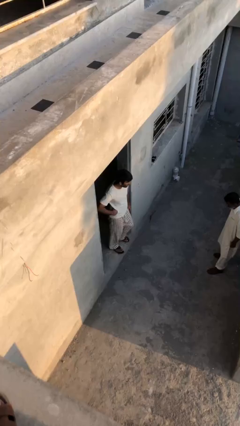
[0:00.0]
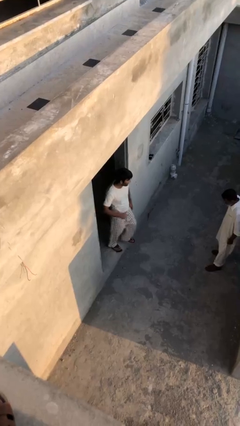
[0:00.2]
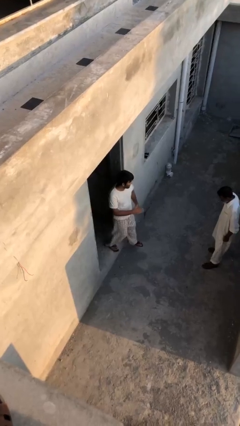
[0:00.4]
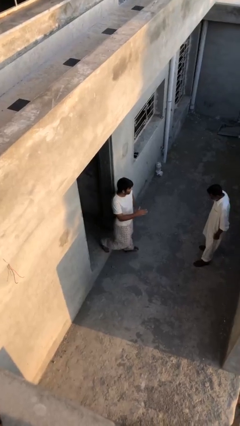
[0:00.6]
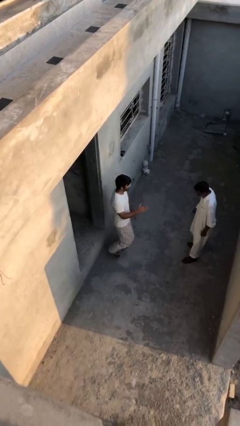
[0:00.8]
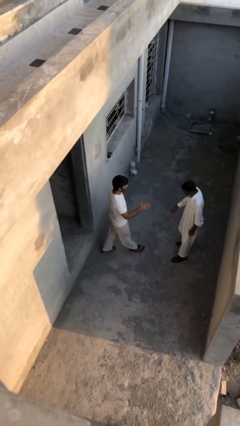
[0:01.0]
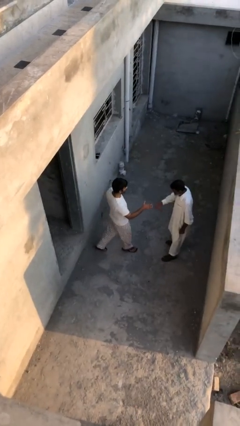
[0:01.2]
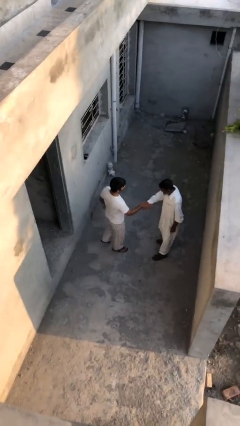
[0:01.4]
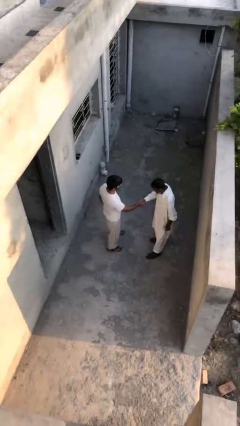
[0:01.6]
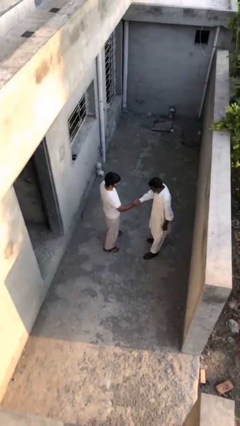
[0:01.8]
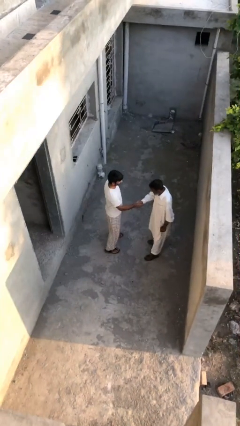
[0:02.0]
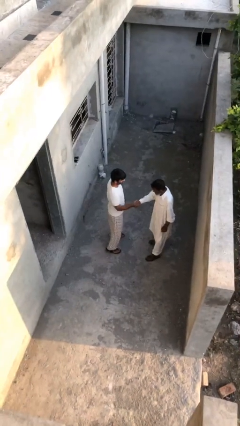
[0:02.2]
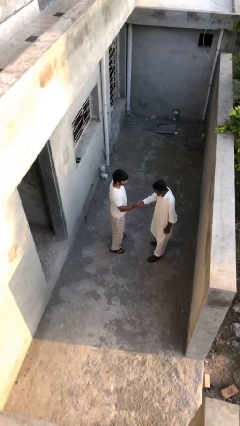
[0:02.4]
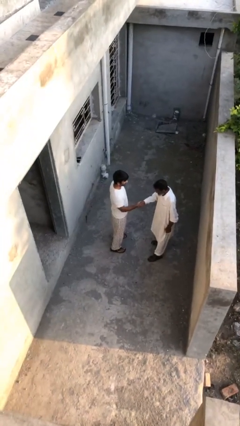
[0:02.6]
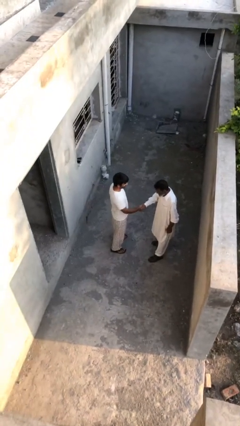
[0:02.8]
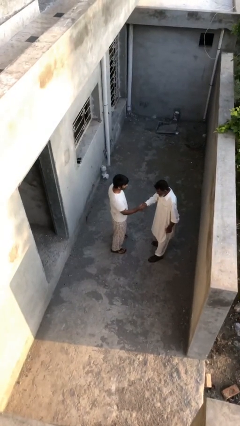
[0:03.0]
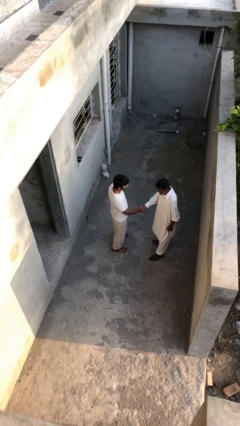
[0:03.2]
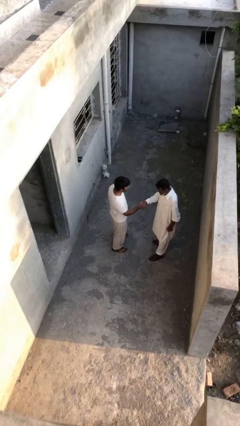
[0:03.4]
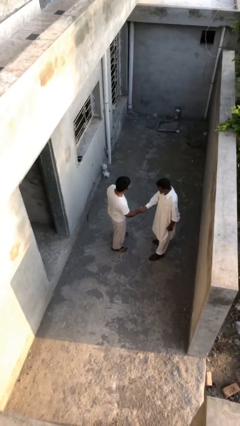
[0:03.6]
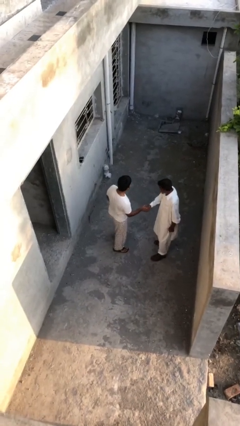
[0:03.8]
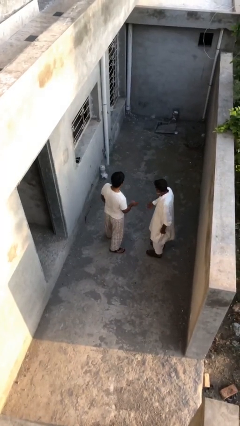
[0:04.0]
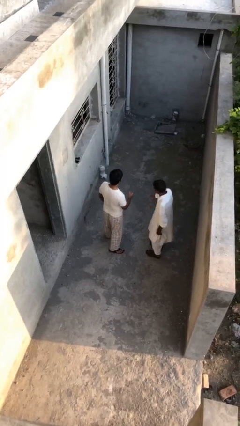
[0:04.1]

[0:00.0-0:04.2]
person shakes hand

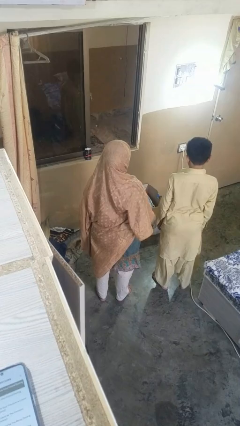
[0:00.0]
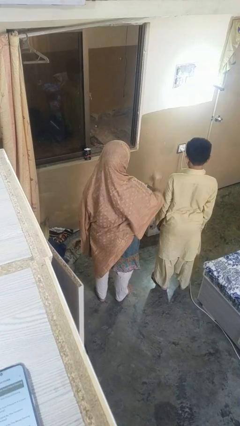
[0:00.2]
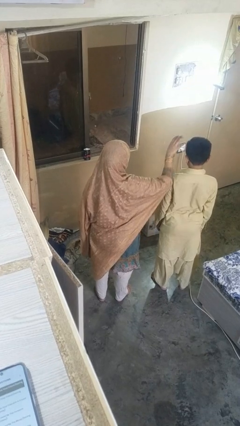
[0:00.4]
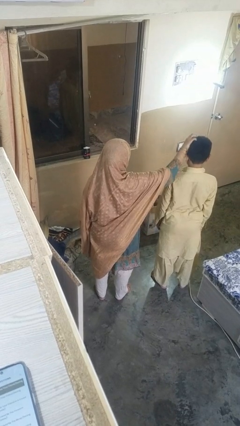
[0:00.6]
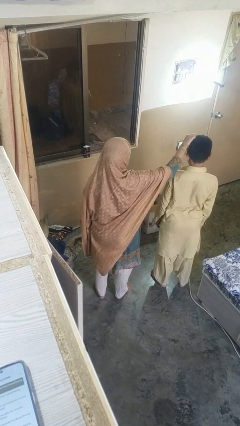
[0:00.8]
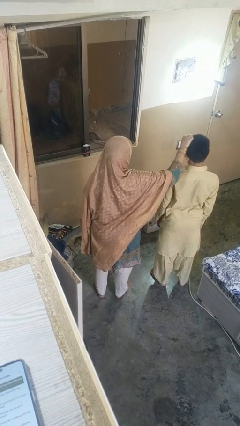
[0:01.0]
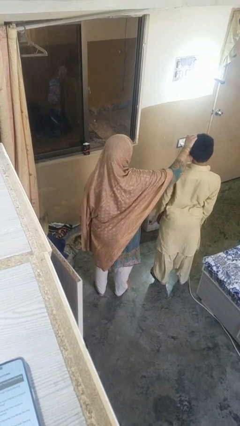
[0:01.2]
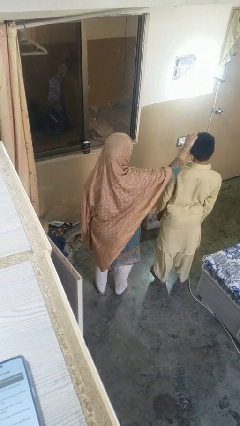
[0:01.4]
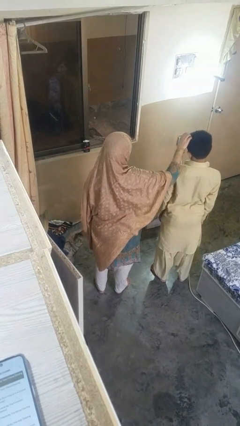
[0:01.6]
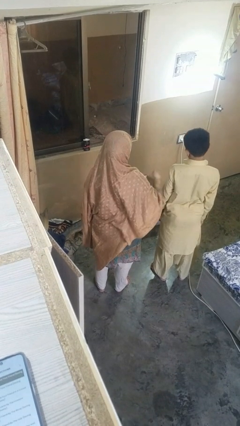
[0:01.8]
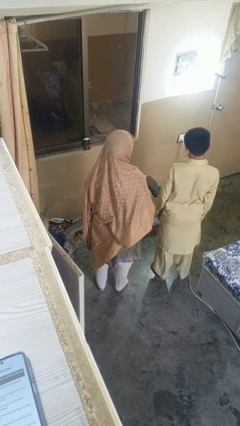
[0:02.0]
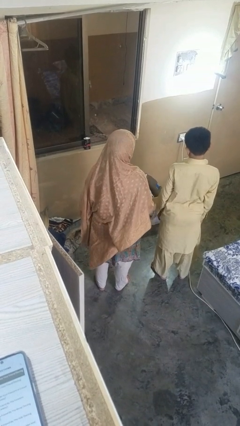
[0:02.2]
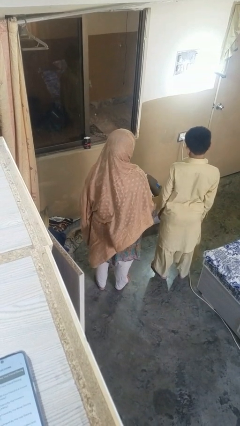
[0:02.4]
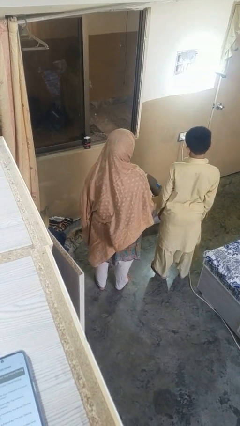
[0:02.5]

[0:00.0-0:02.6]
person grabs person by hair

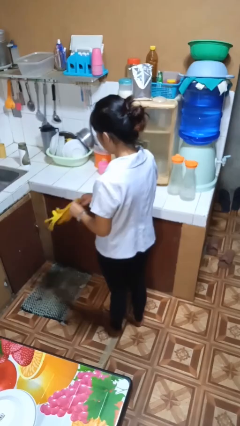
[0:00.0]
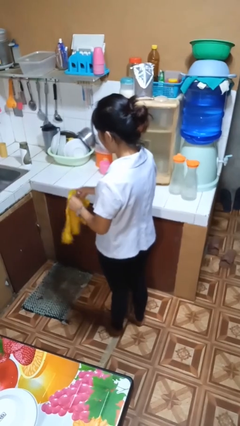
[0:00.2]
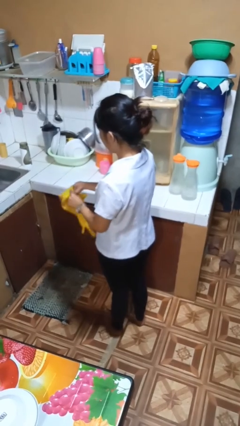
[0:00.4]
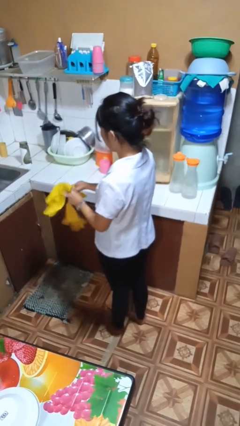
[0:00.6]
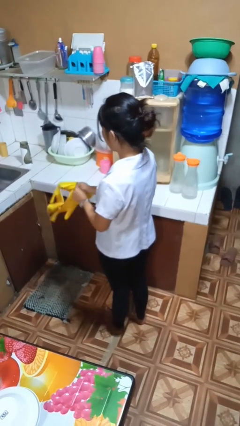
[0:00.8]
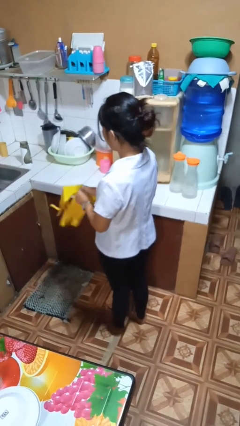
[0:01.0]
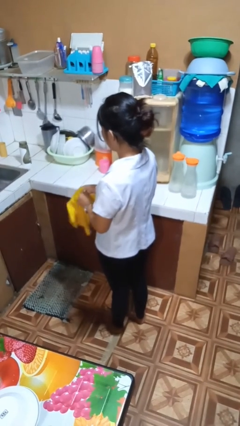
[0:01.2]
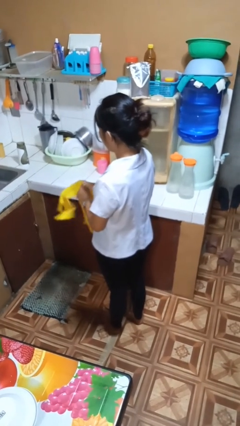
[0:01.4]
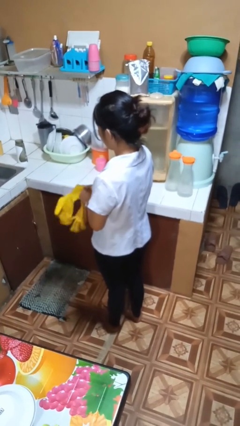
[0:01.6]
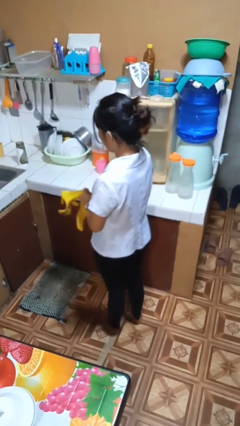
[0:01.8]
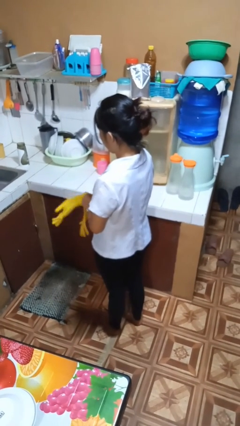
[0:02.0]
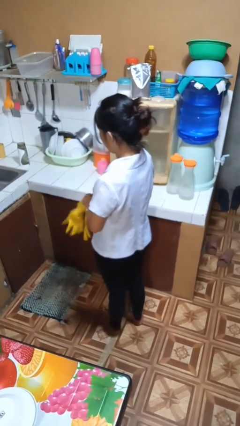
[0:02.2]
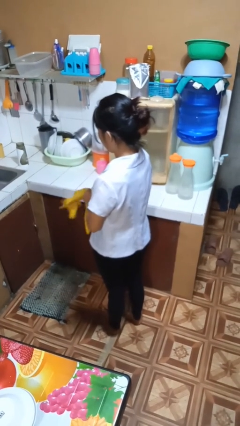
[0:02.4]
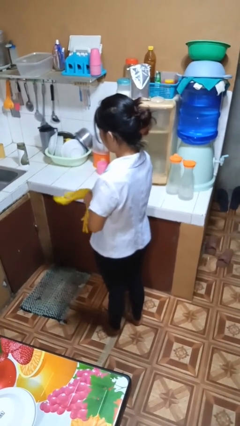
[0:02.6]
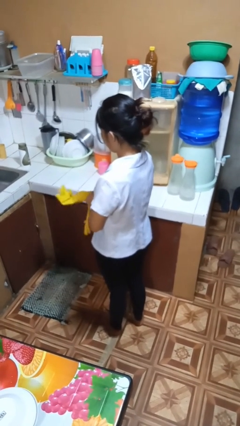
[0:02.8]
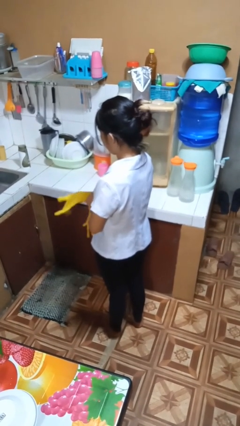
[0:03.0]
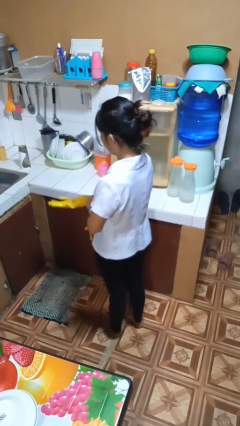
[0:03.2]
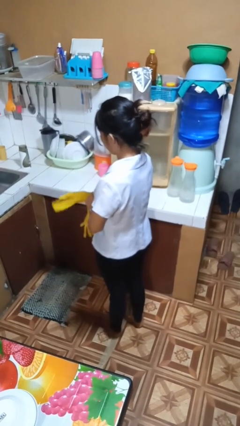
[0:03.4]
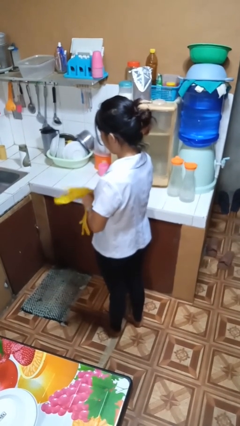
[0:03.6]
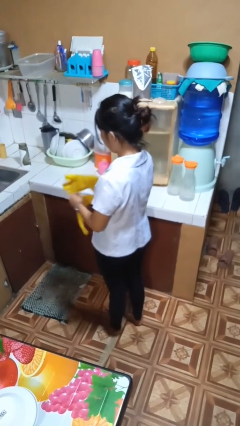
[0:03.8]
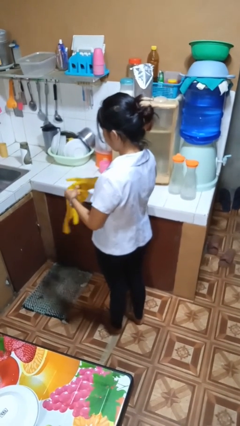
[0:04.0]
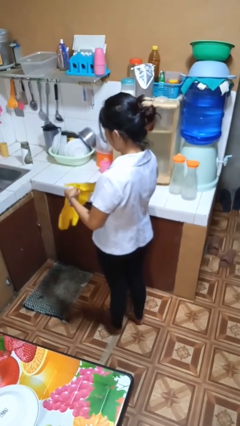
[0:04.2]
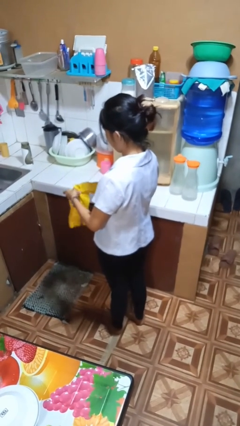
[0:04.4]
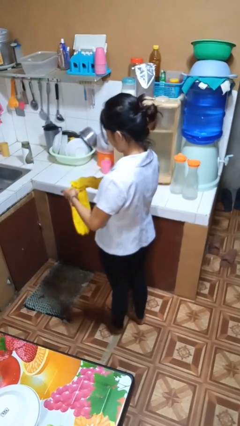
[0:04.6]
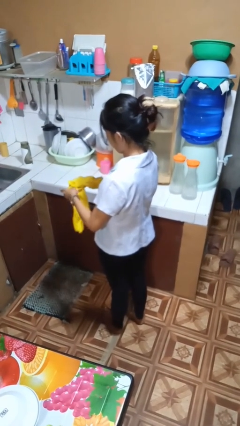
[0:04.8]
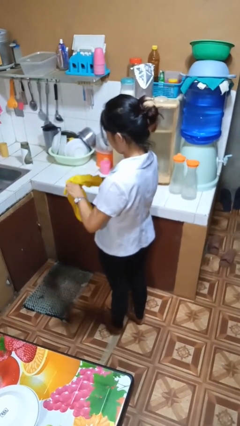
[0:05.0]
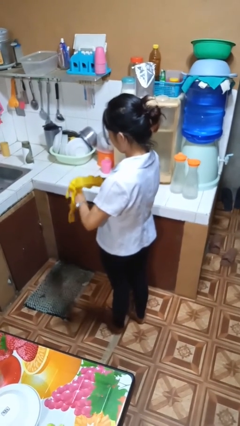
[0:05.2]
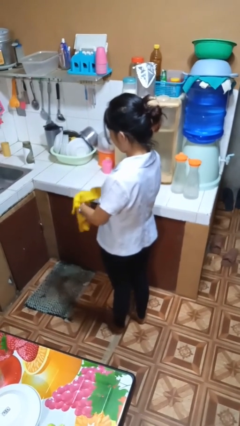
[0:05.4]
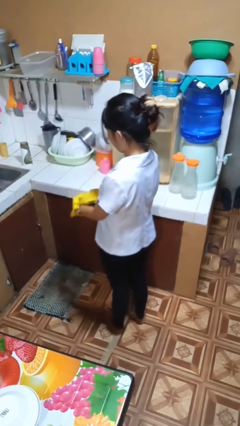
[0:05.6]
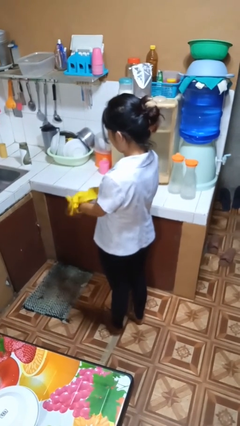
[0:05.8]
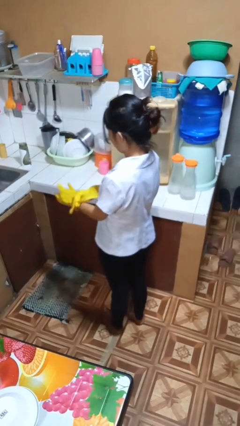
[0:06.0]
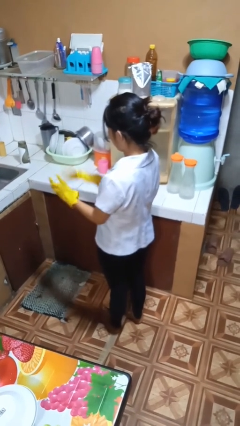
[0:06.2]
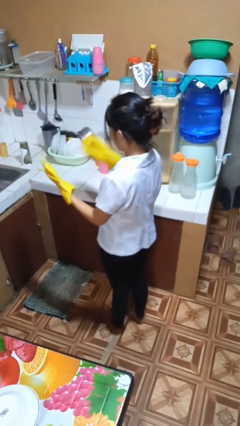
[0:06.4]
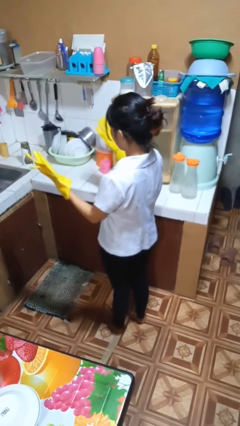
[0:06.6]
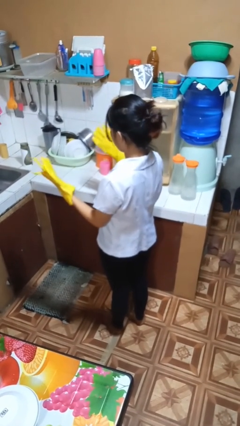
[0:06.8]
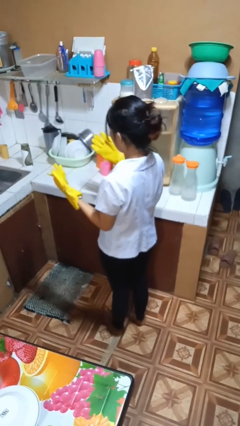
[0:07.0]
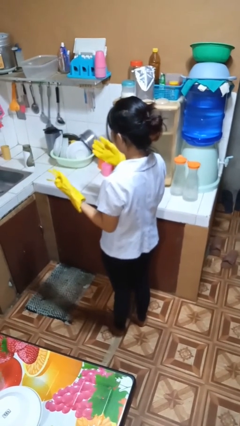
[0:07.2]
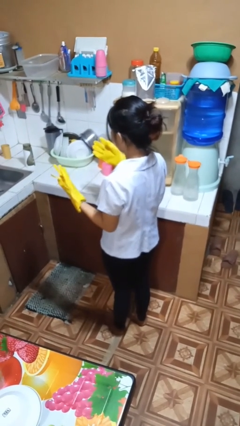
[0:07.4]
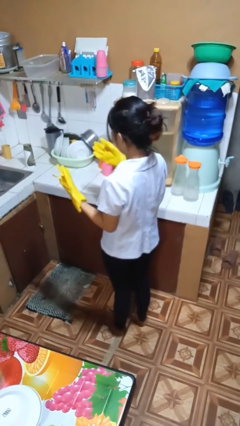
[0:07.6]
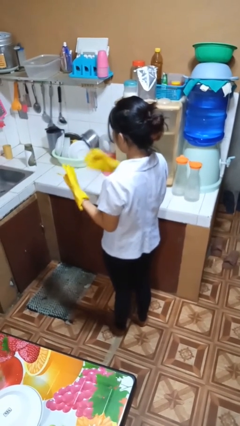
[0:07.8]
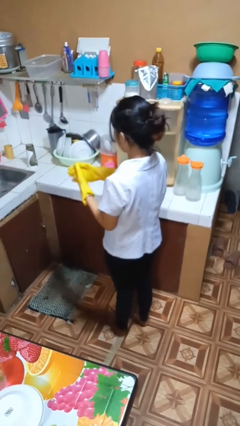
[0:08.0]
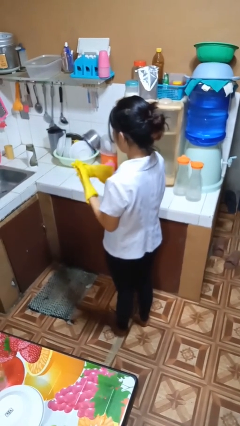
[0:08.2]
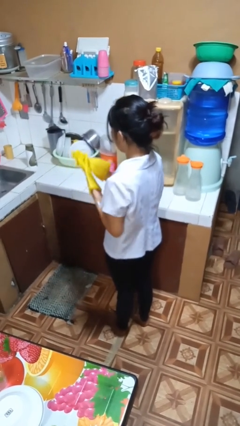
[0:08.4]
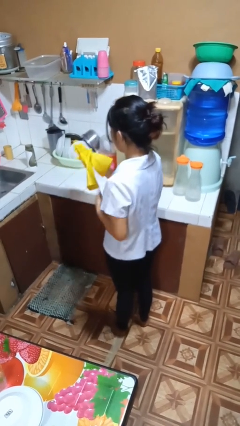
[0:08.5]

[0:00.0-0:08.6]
person puts on gloves

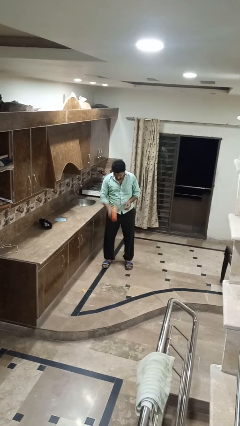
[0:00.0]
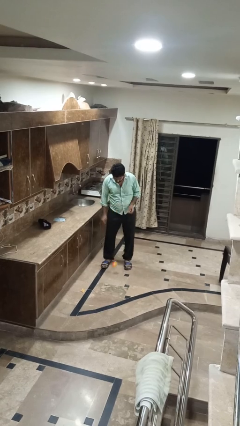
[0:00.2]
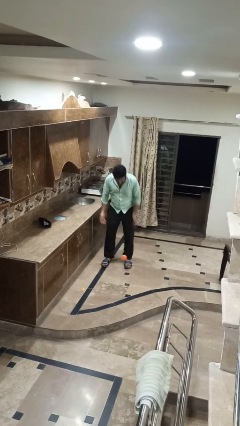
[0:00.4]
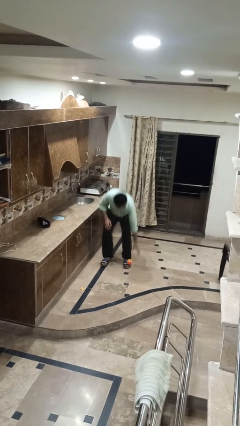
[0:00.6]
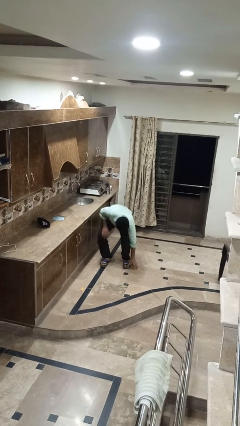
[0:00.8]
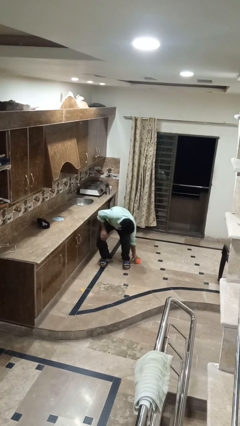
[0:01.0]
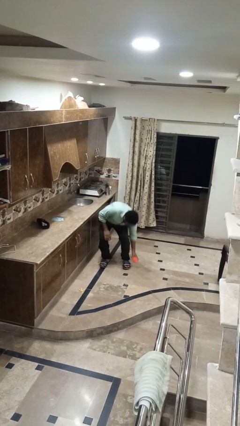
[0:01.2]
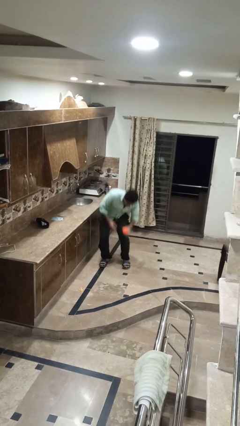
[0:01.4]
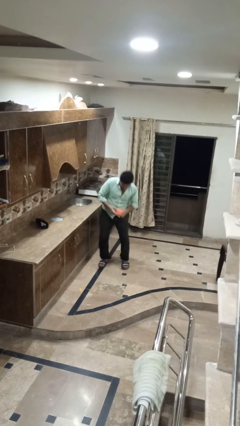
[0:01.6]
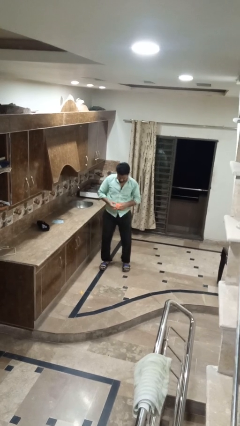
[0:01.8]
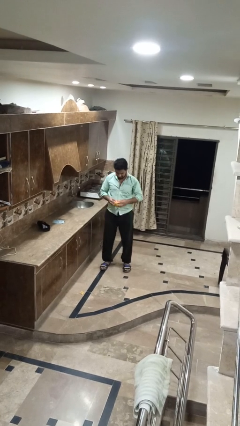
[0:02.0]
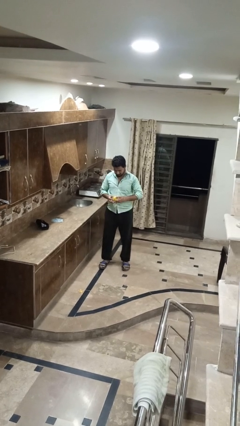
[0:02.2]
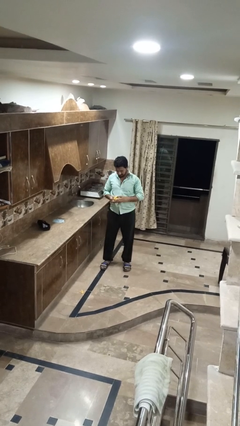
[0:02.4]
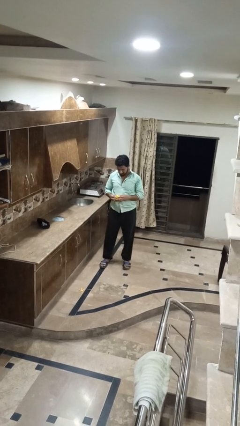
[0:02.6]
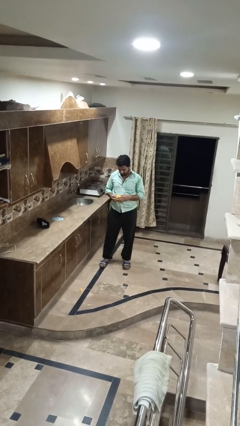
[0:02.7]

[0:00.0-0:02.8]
person bounces ball on floor
